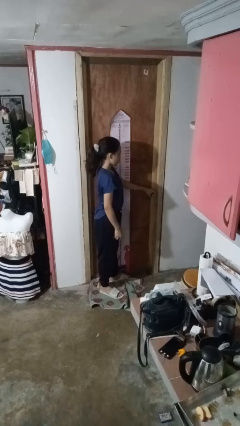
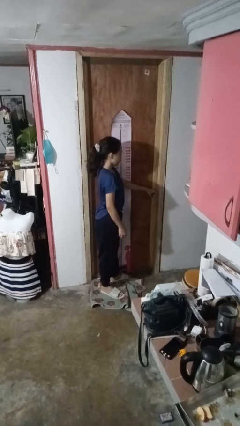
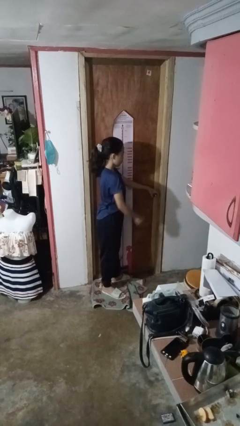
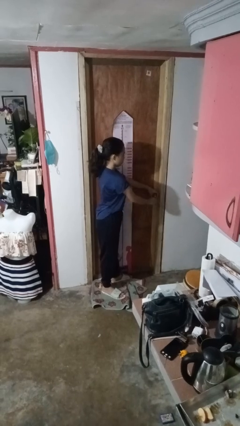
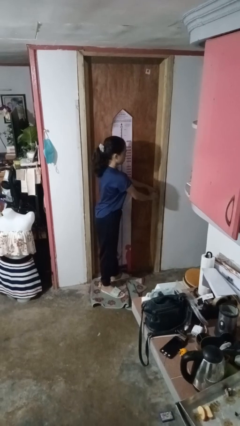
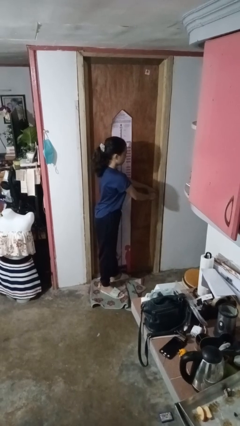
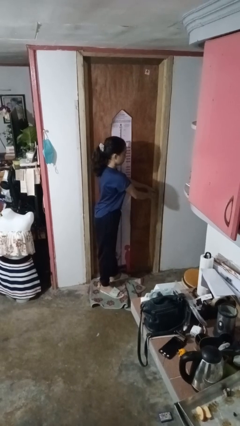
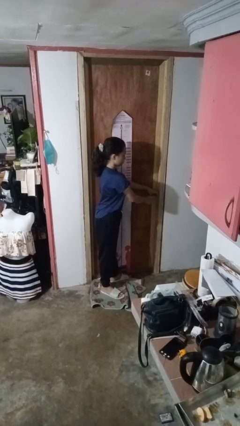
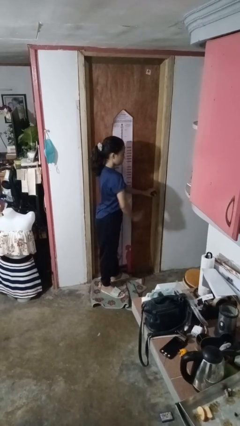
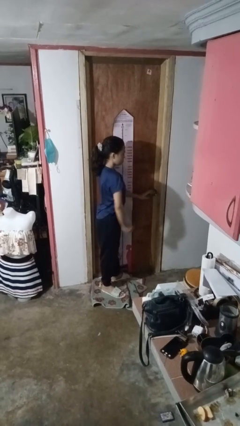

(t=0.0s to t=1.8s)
person locks door with keys

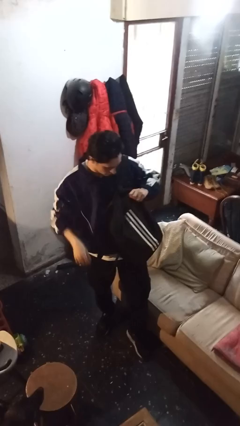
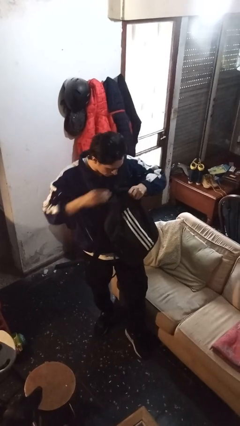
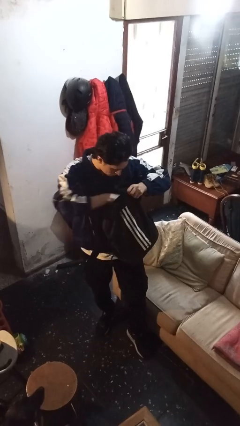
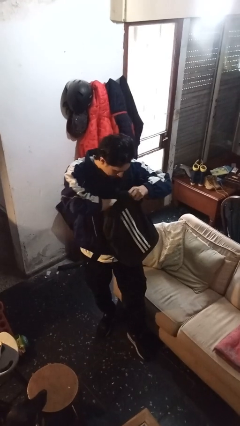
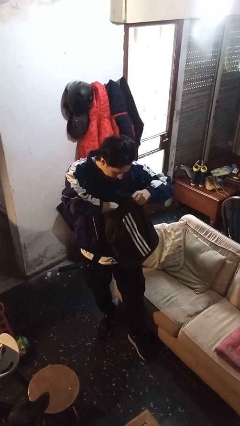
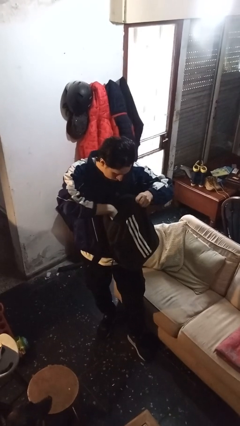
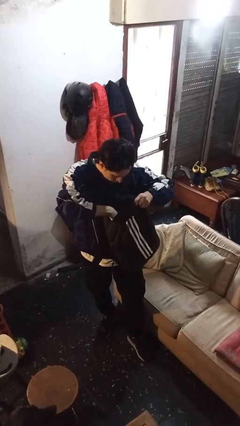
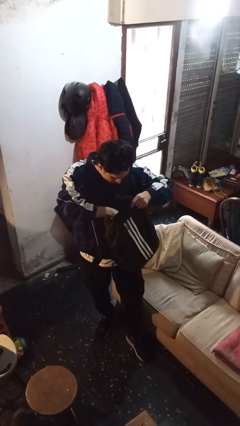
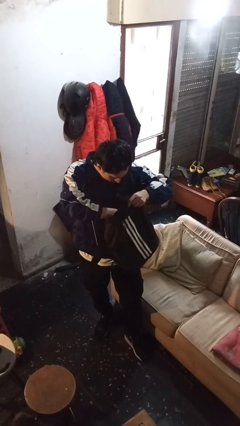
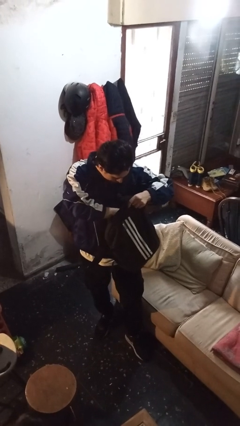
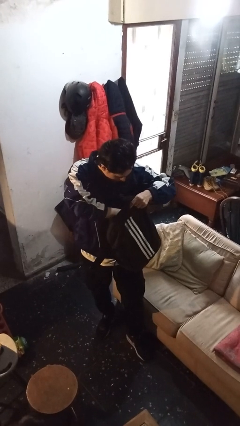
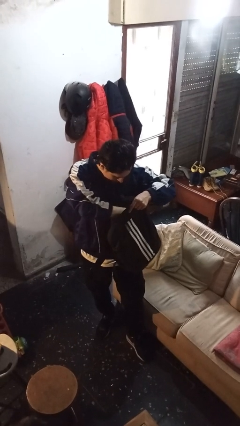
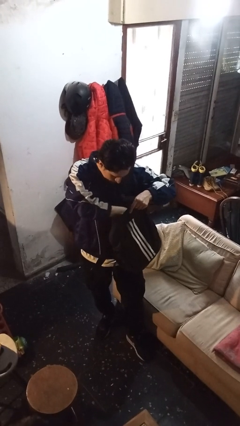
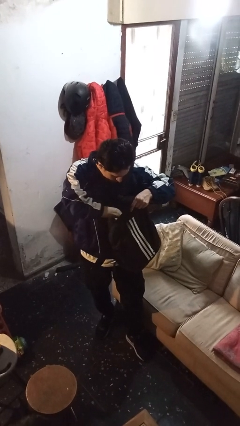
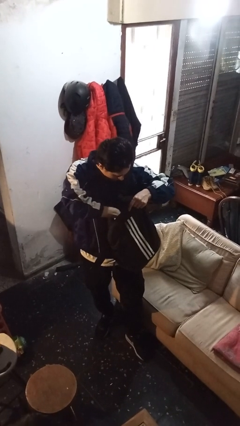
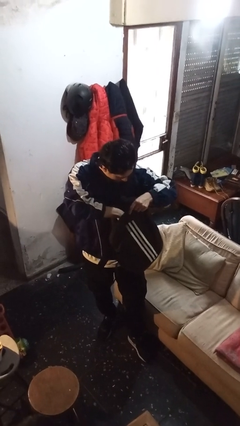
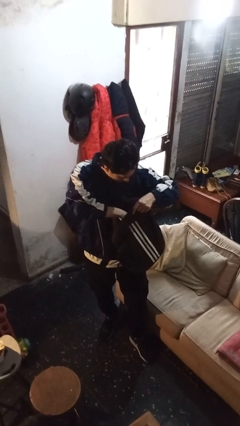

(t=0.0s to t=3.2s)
person searches in backpack

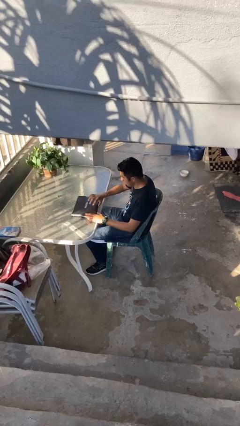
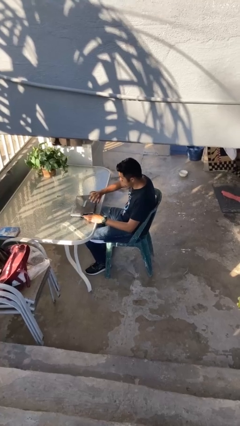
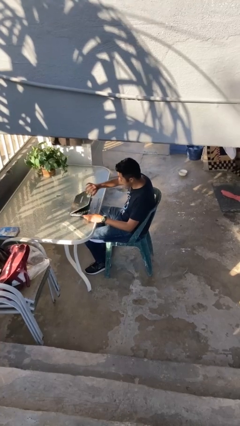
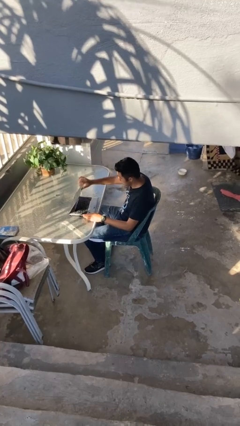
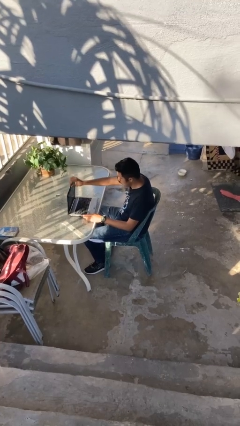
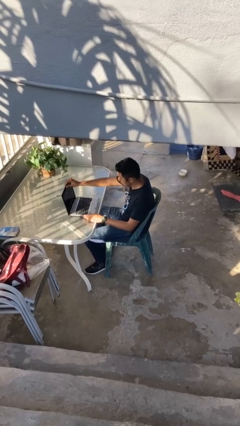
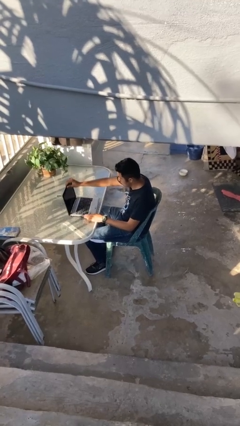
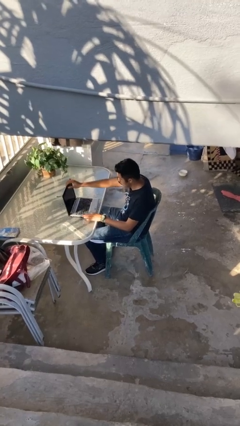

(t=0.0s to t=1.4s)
person interacts with laptop

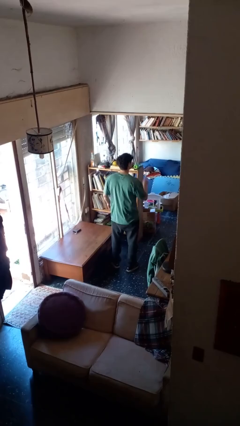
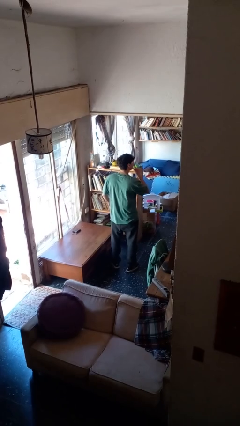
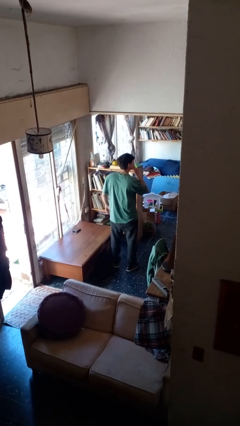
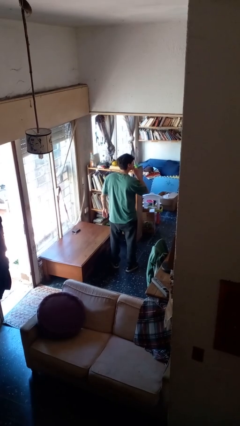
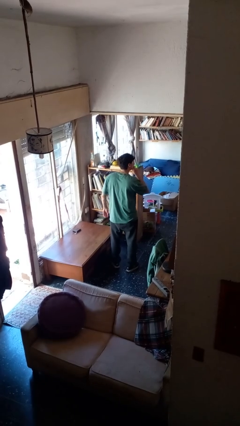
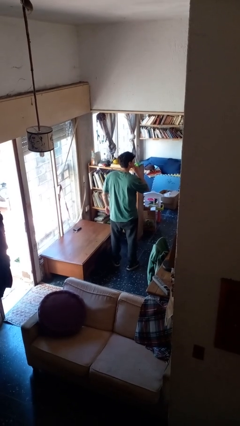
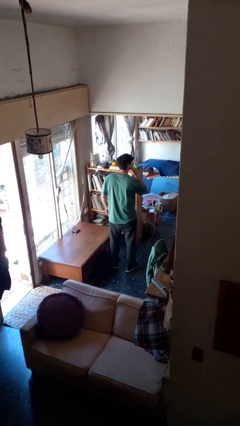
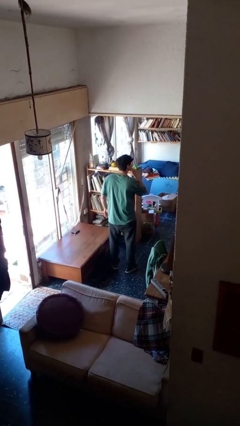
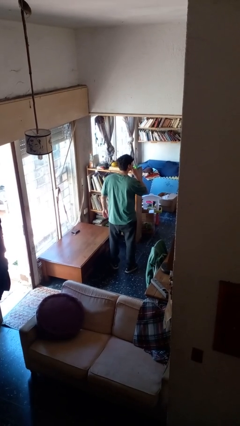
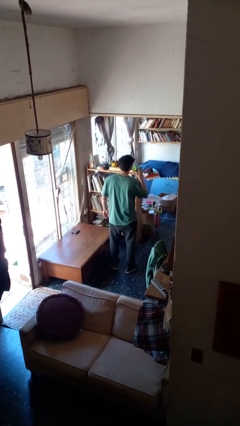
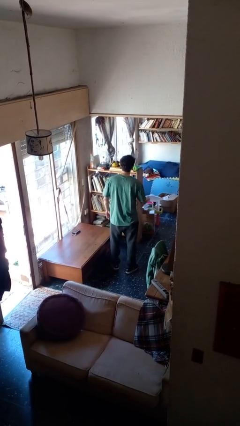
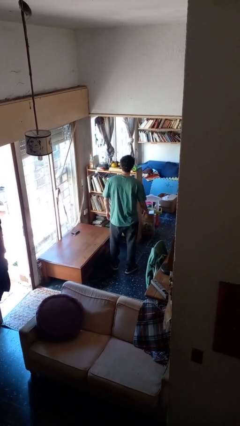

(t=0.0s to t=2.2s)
person gestures be quiet

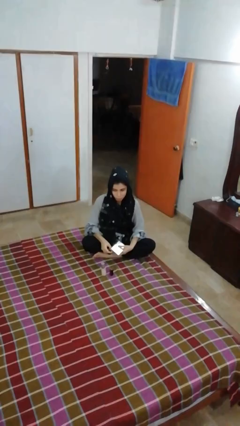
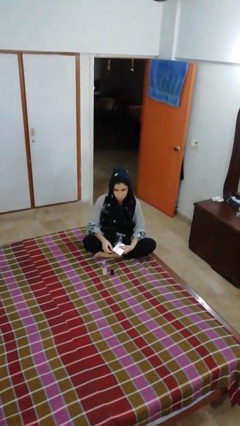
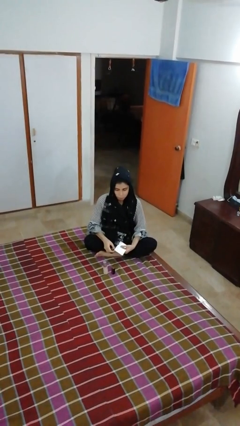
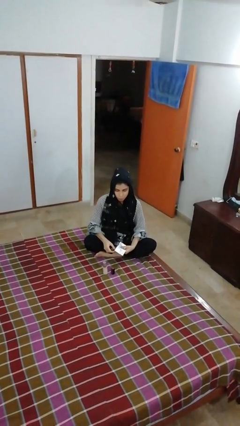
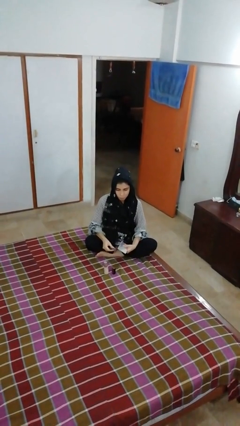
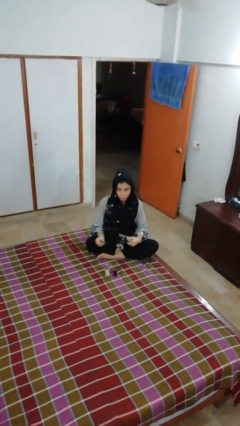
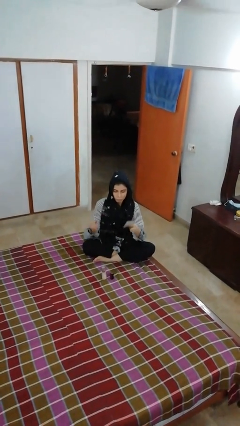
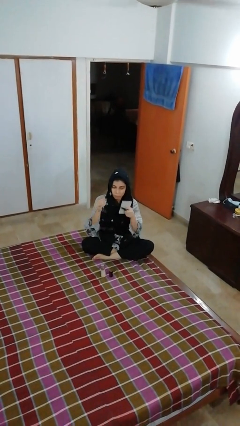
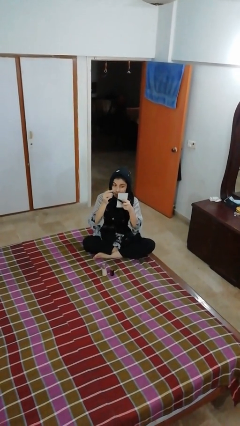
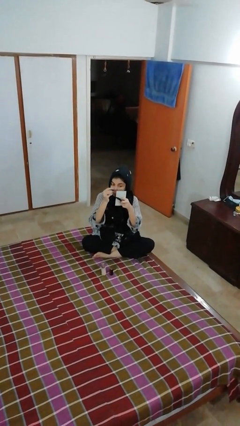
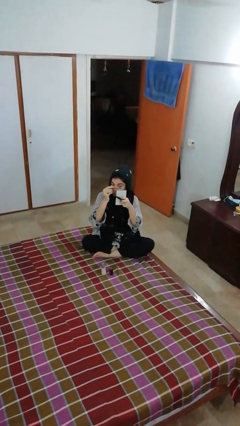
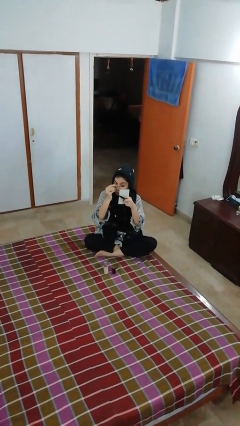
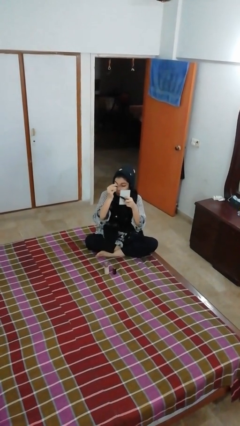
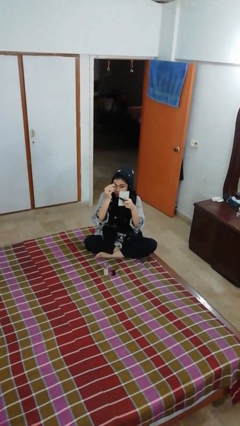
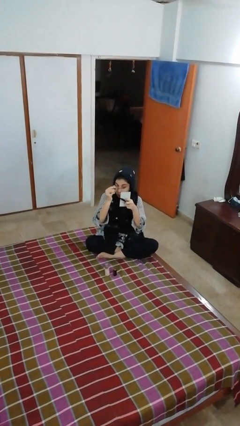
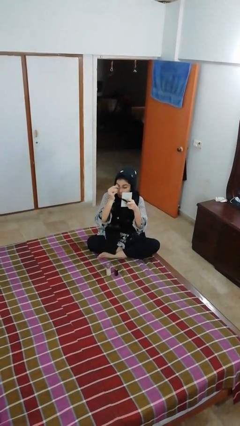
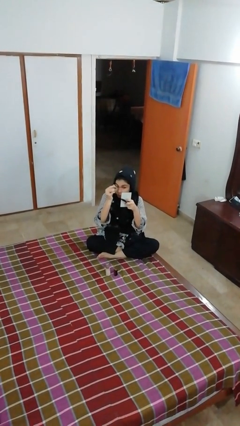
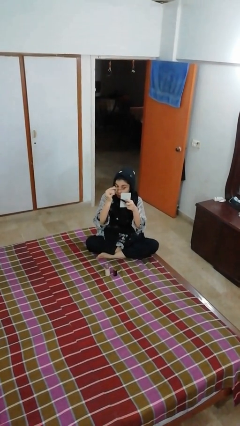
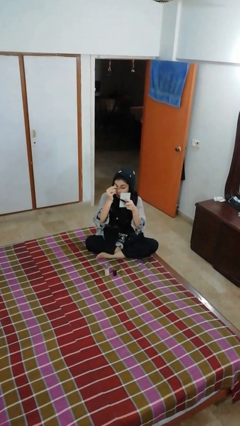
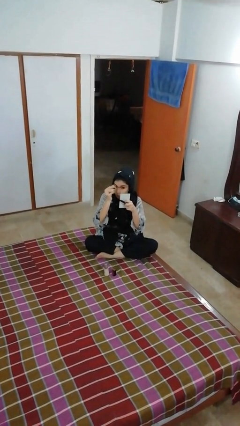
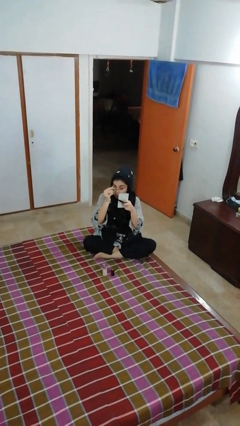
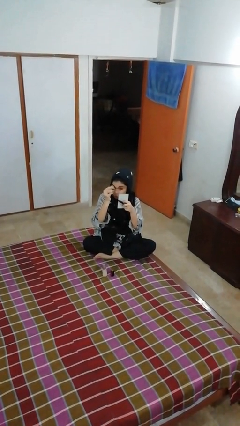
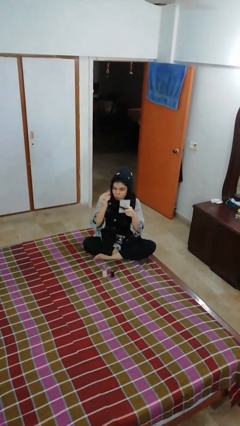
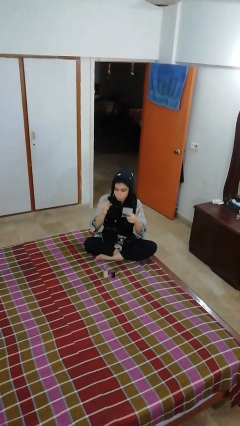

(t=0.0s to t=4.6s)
person applies eye makeup

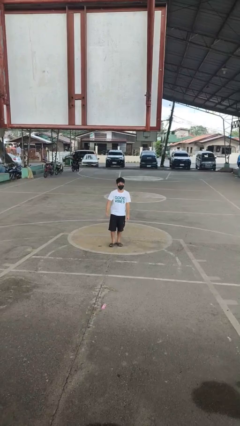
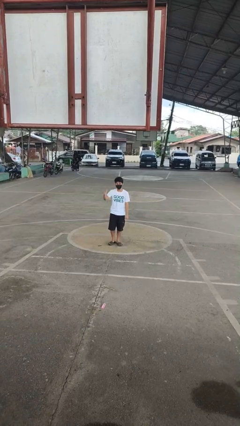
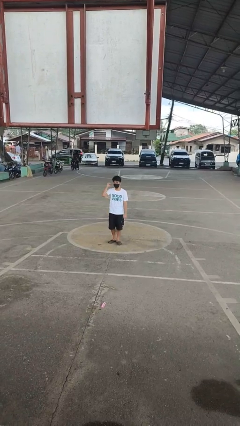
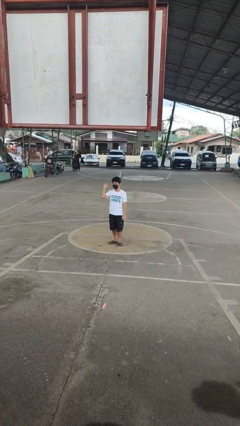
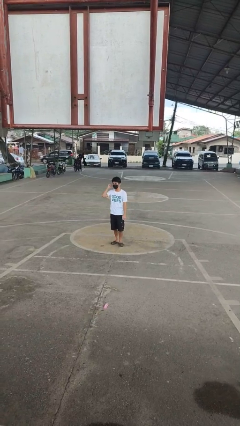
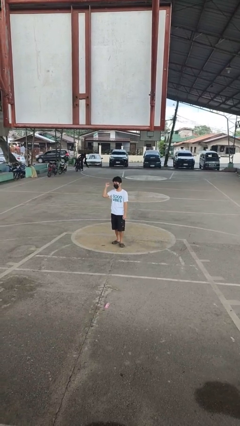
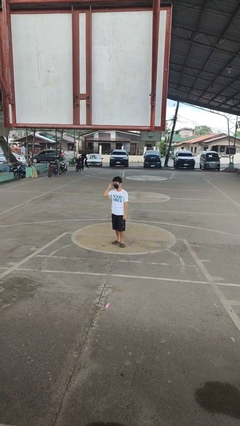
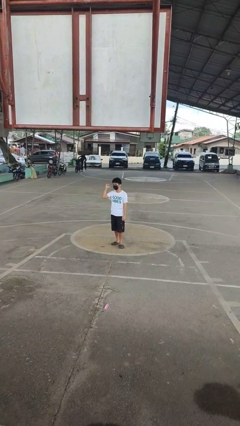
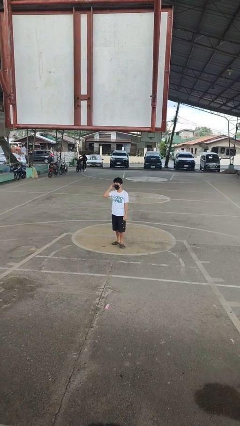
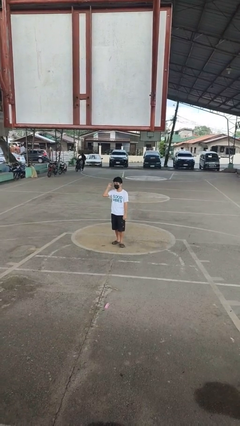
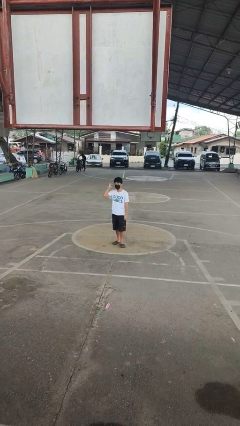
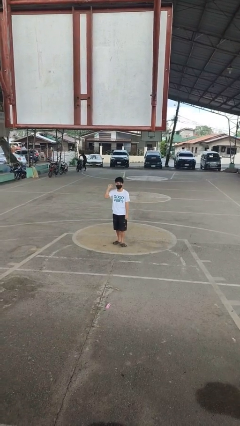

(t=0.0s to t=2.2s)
person gestures behind me

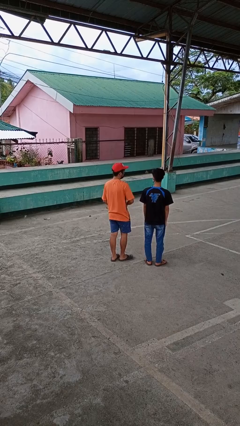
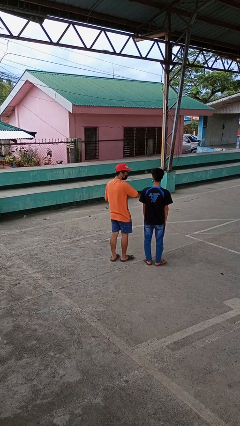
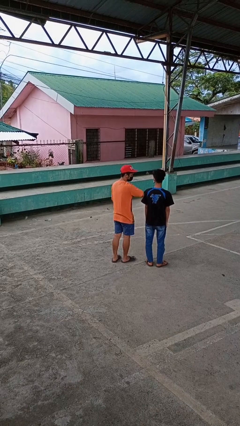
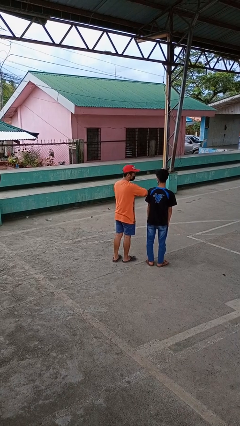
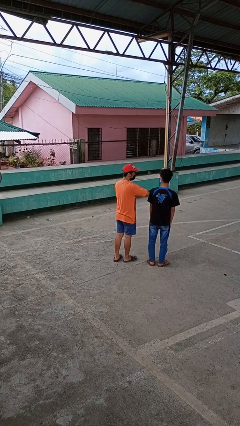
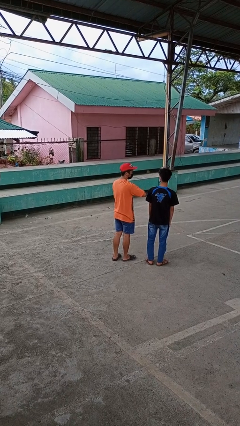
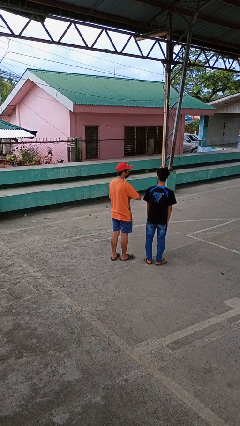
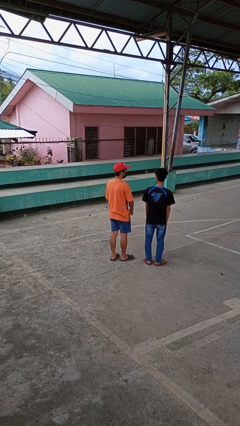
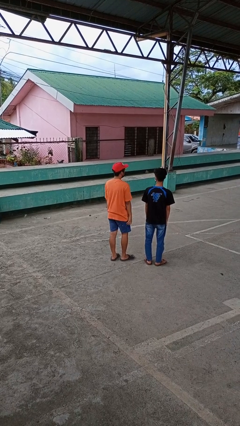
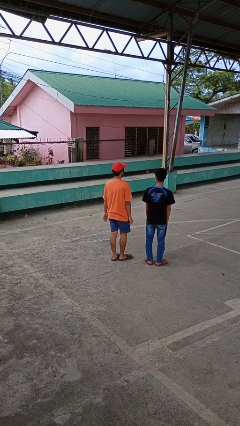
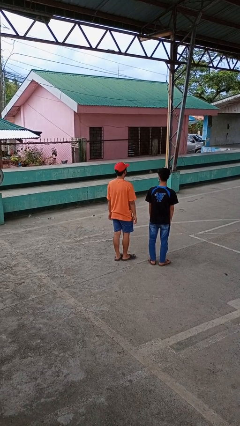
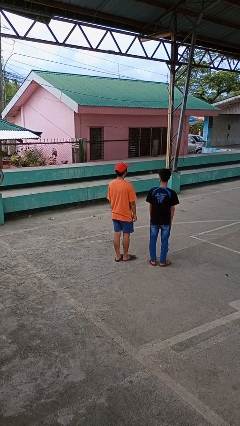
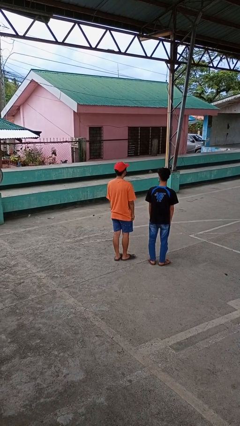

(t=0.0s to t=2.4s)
person nudges person with elbow
